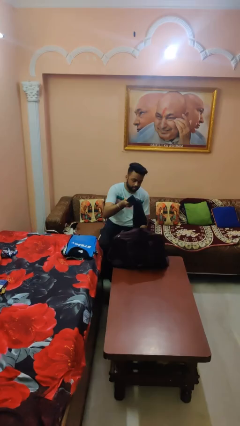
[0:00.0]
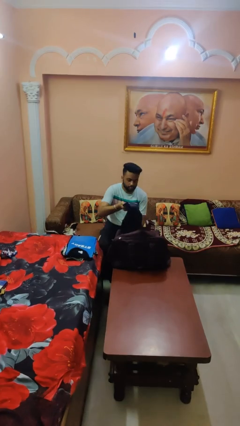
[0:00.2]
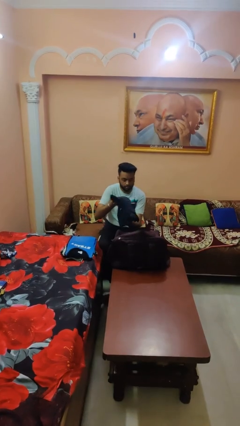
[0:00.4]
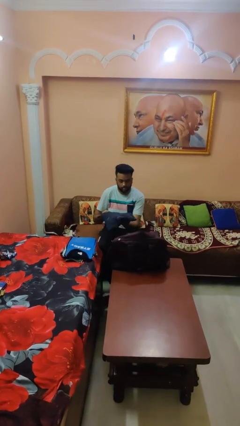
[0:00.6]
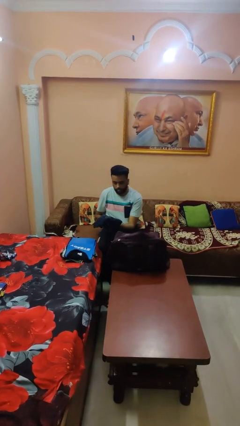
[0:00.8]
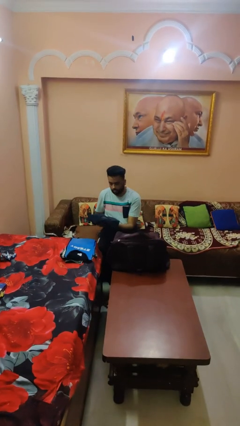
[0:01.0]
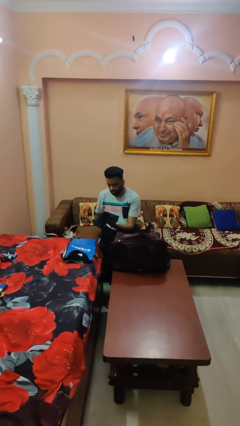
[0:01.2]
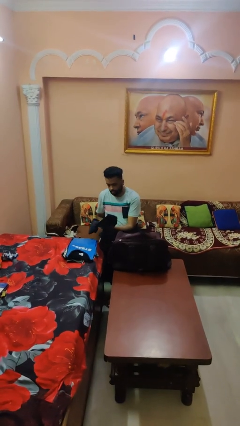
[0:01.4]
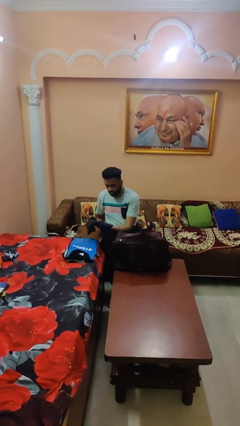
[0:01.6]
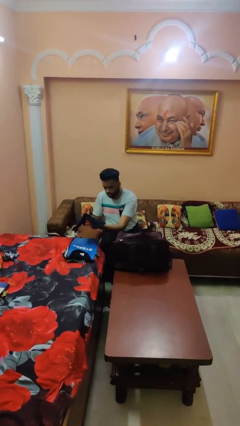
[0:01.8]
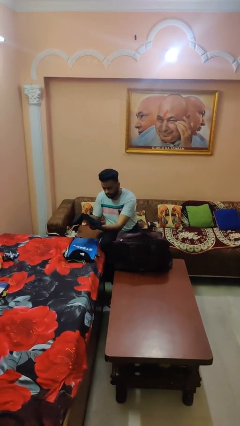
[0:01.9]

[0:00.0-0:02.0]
person unloads clothes from suitcase

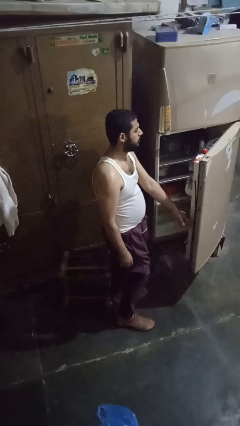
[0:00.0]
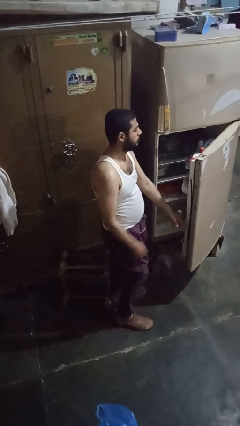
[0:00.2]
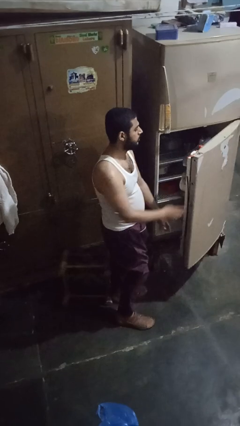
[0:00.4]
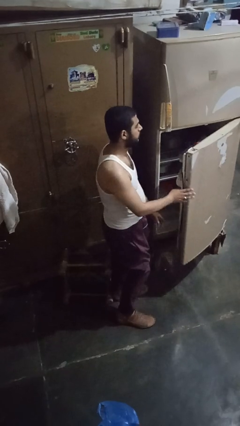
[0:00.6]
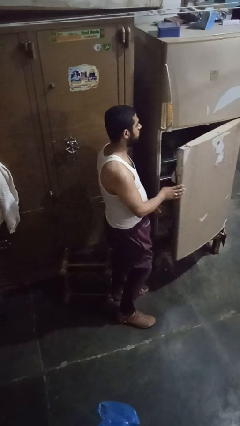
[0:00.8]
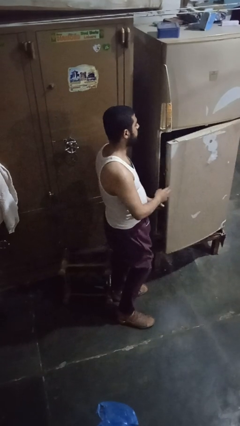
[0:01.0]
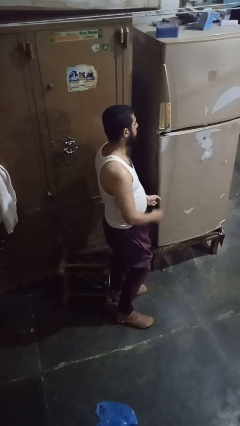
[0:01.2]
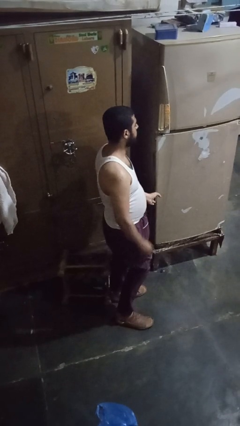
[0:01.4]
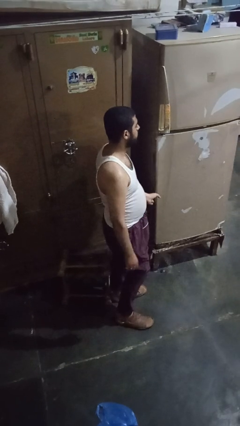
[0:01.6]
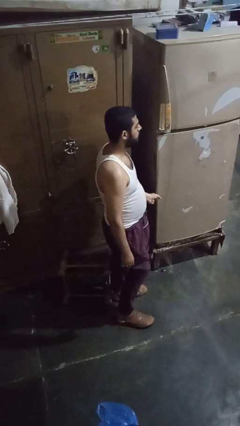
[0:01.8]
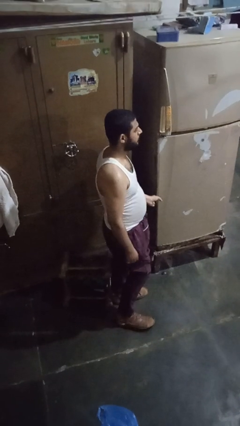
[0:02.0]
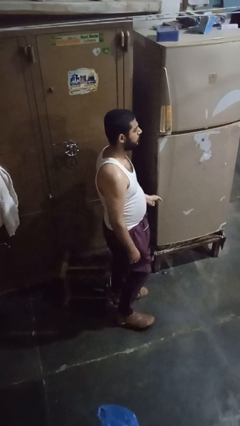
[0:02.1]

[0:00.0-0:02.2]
person closes refrigerator

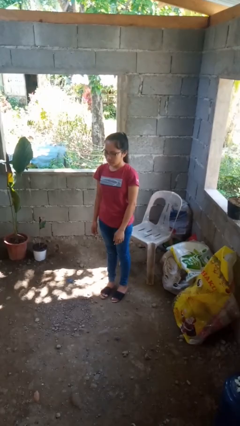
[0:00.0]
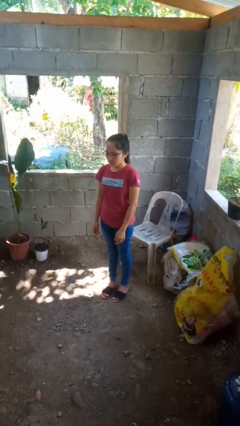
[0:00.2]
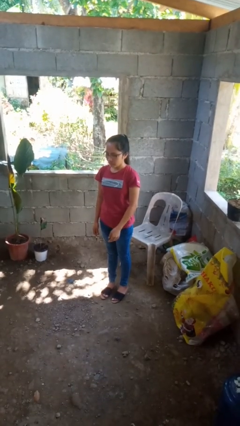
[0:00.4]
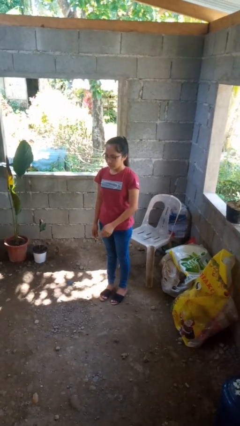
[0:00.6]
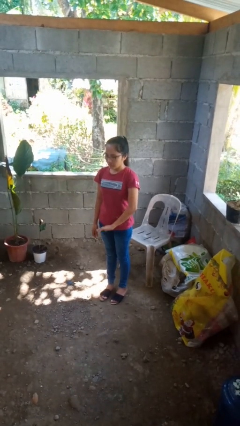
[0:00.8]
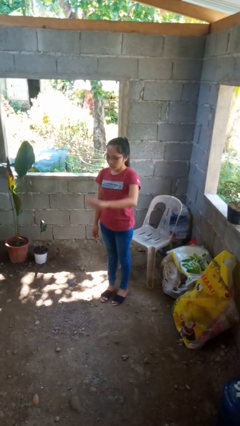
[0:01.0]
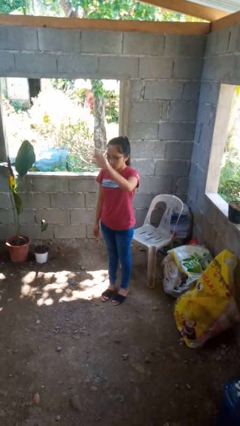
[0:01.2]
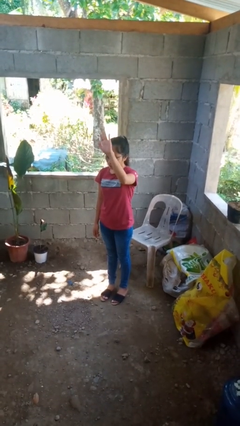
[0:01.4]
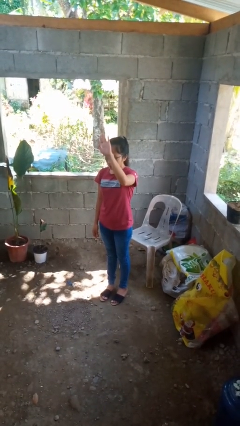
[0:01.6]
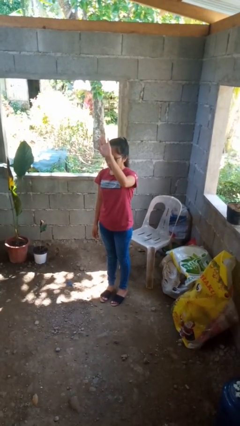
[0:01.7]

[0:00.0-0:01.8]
person gestures swipe up

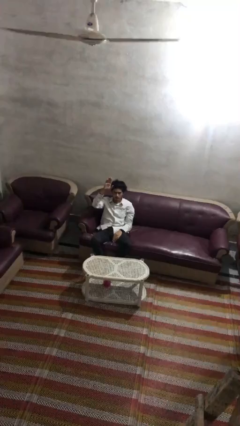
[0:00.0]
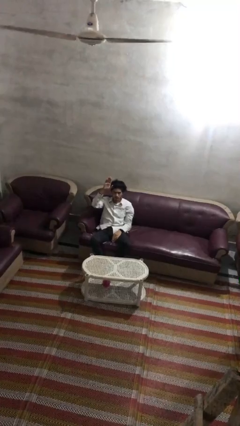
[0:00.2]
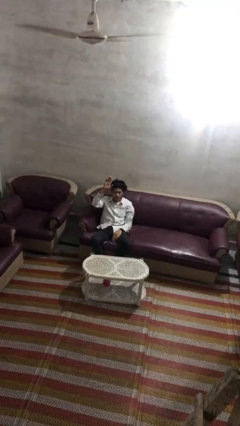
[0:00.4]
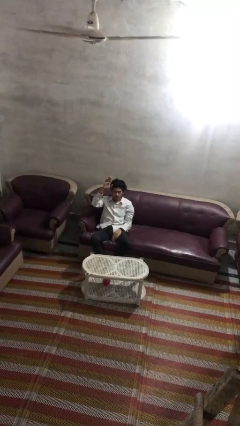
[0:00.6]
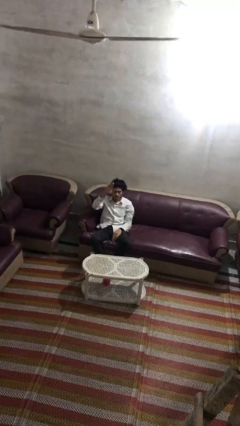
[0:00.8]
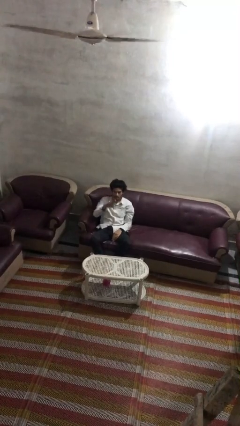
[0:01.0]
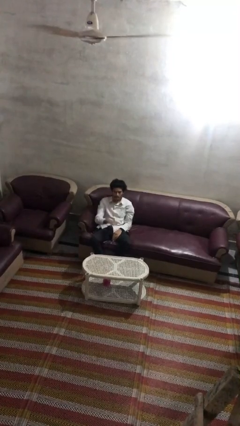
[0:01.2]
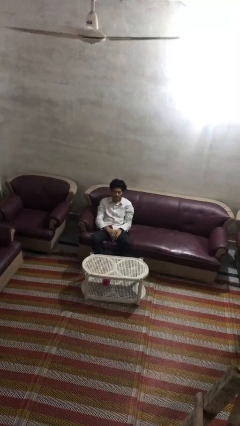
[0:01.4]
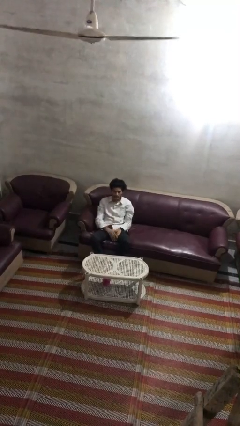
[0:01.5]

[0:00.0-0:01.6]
person gestures lower hand

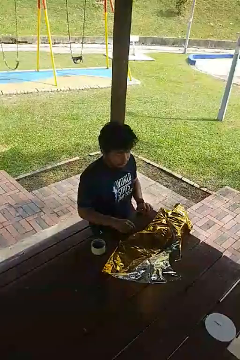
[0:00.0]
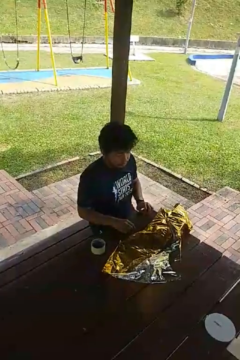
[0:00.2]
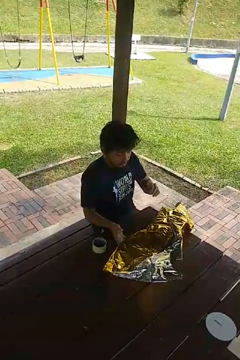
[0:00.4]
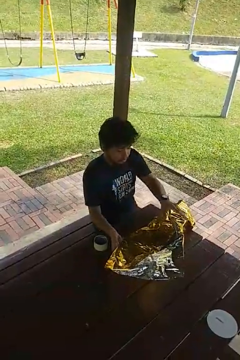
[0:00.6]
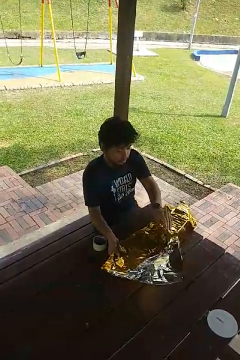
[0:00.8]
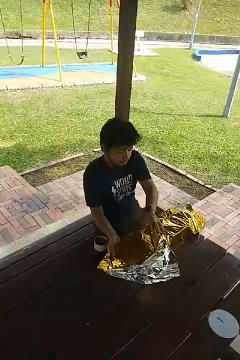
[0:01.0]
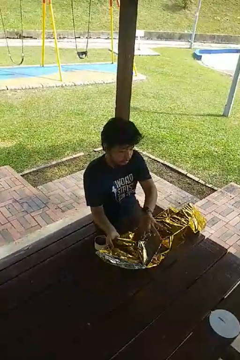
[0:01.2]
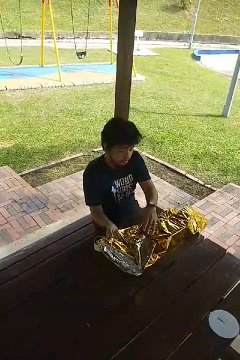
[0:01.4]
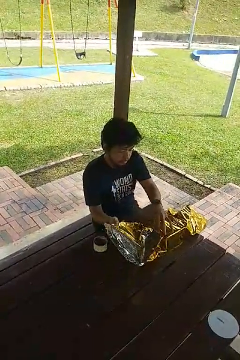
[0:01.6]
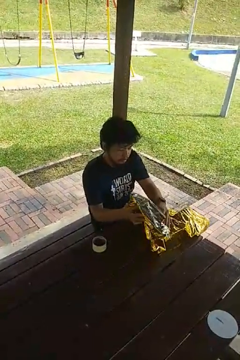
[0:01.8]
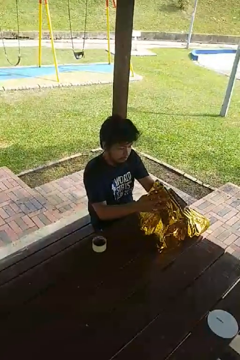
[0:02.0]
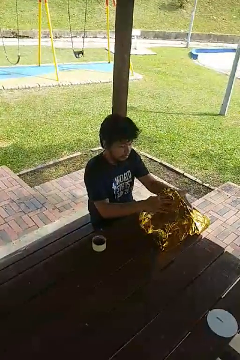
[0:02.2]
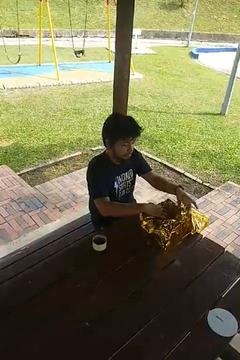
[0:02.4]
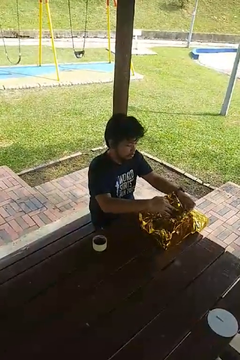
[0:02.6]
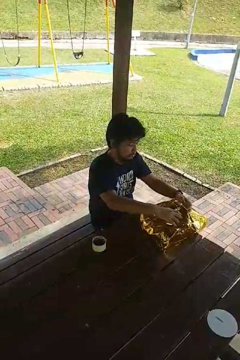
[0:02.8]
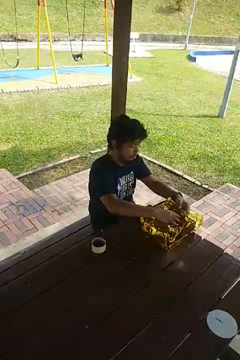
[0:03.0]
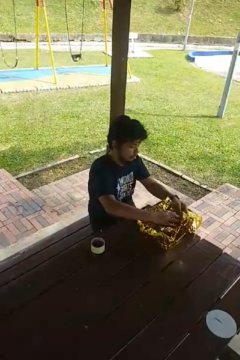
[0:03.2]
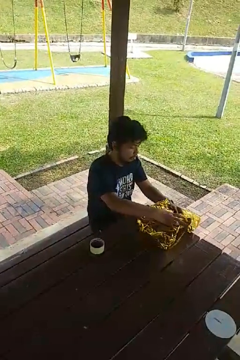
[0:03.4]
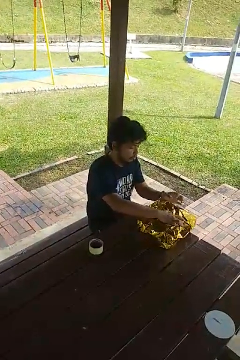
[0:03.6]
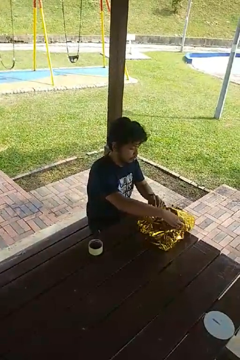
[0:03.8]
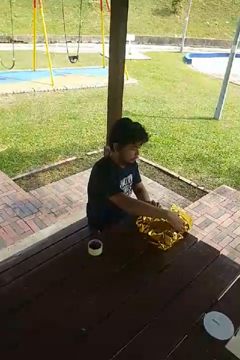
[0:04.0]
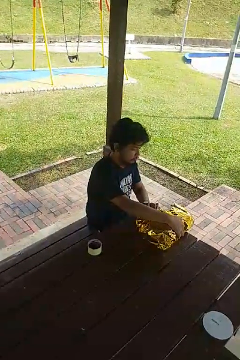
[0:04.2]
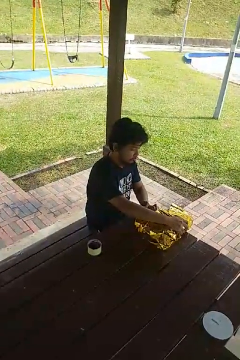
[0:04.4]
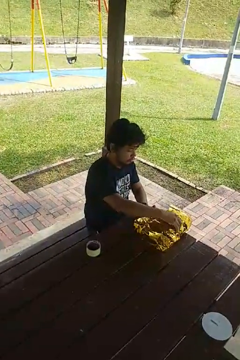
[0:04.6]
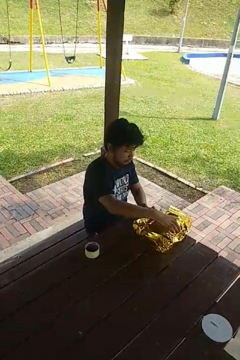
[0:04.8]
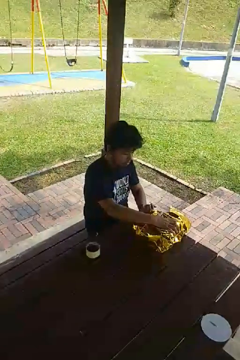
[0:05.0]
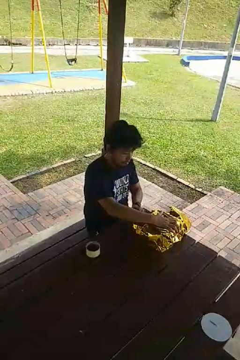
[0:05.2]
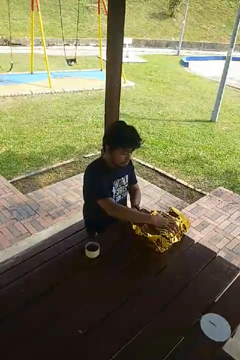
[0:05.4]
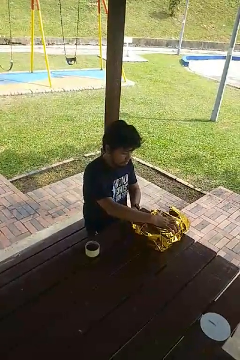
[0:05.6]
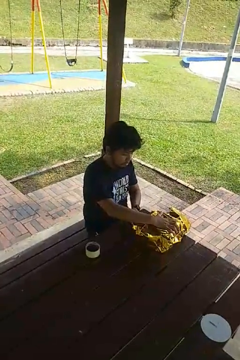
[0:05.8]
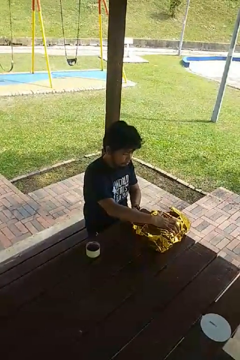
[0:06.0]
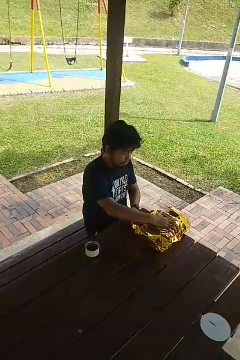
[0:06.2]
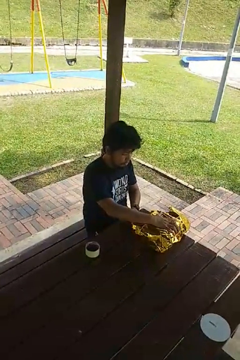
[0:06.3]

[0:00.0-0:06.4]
person wraps box

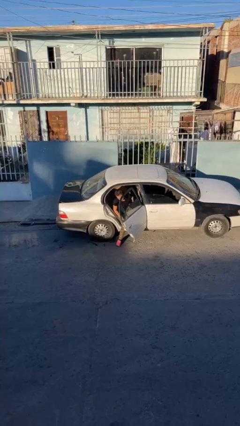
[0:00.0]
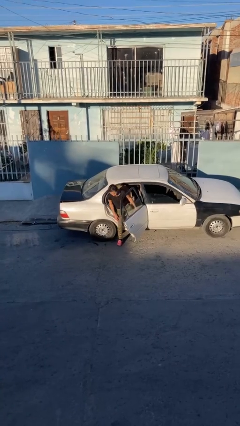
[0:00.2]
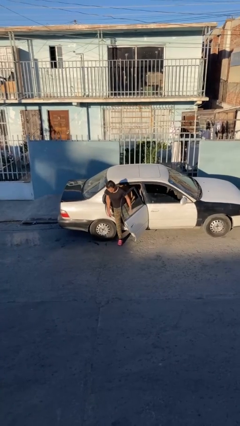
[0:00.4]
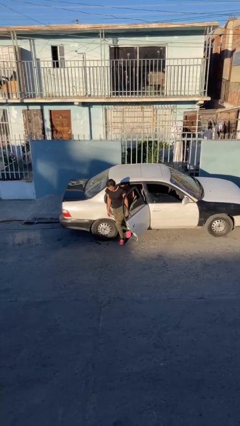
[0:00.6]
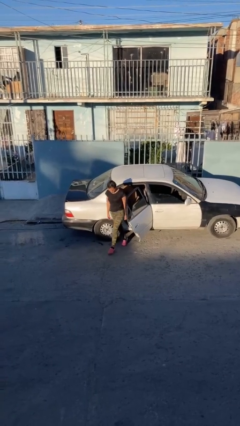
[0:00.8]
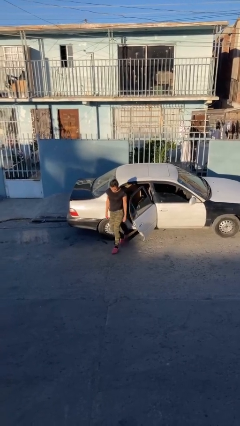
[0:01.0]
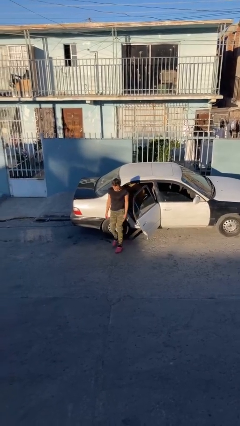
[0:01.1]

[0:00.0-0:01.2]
person exits car

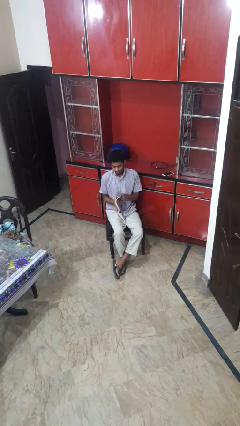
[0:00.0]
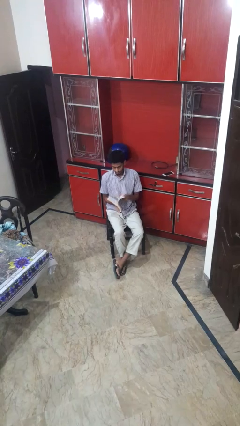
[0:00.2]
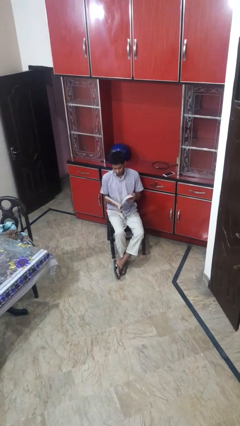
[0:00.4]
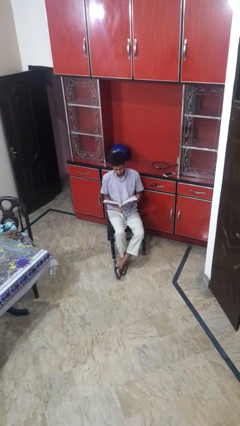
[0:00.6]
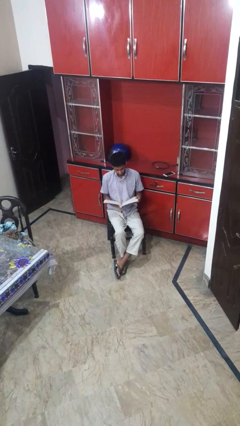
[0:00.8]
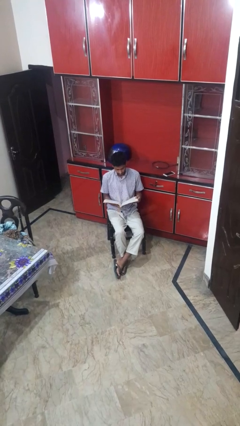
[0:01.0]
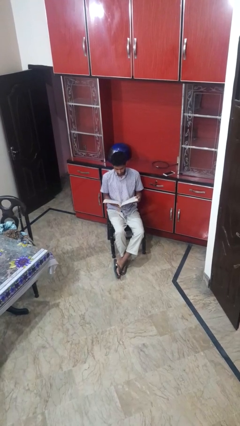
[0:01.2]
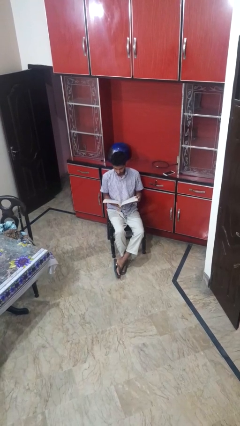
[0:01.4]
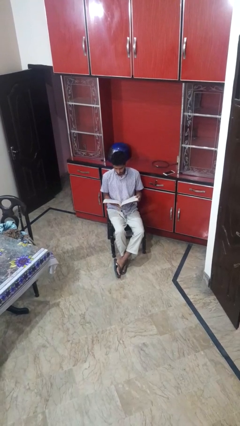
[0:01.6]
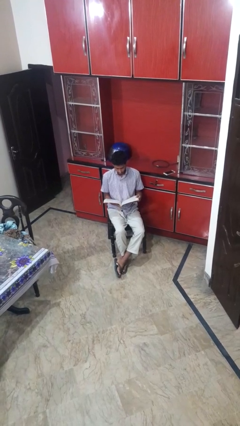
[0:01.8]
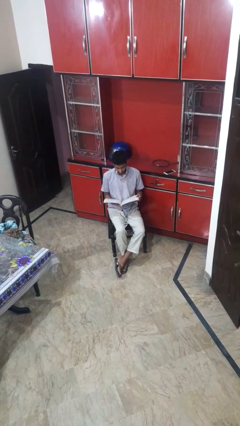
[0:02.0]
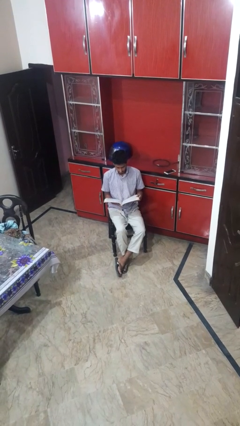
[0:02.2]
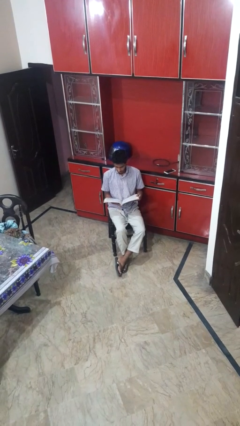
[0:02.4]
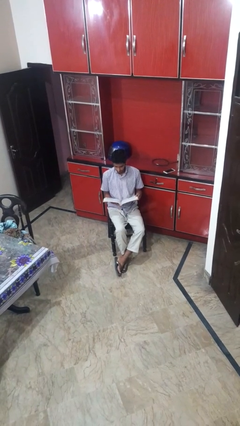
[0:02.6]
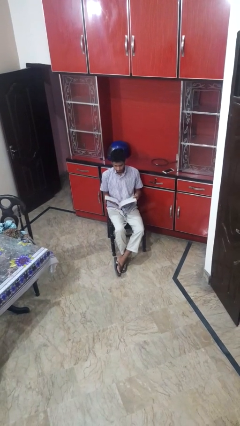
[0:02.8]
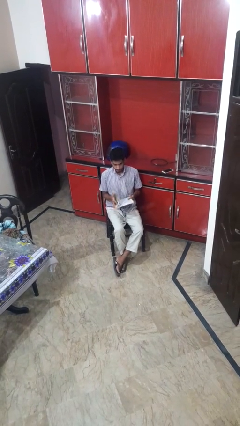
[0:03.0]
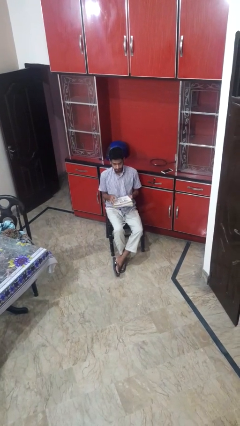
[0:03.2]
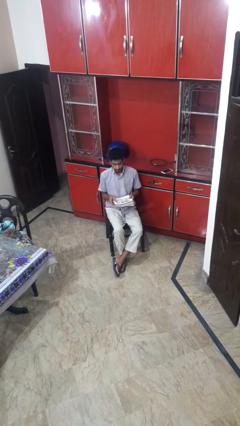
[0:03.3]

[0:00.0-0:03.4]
person reads magazine

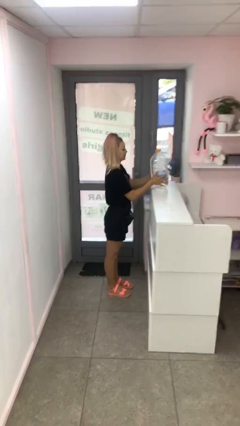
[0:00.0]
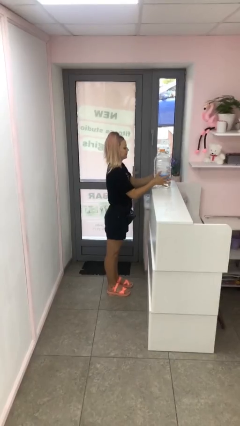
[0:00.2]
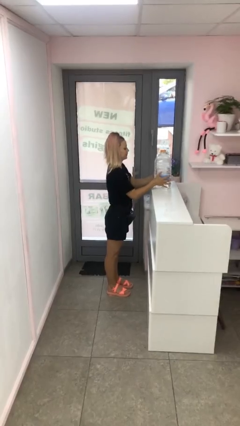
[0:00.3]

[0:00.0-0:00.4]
person puts down object on countertop
